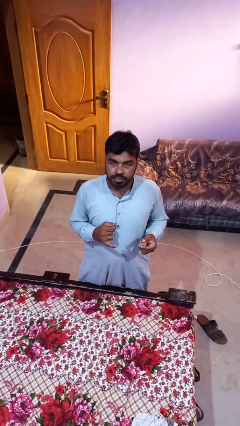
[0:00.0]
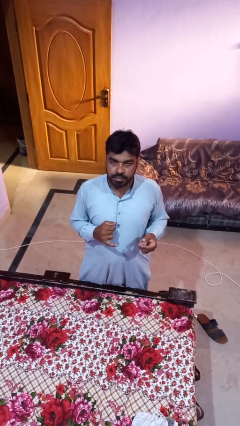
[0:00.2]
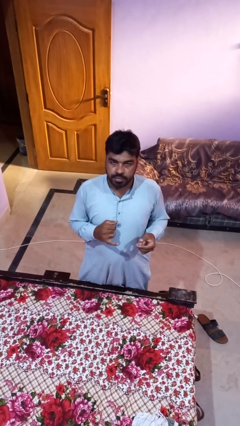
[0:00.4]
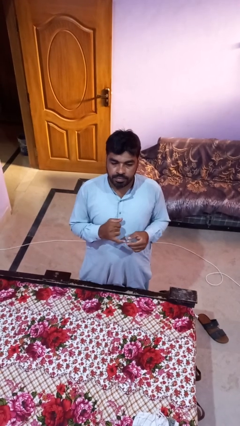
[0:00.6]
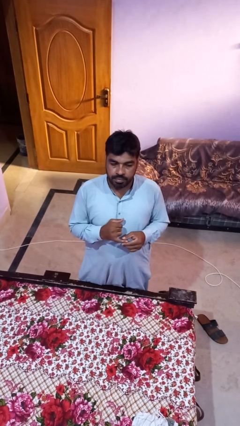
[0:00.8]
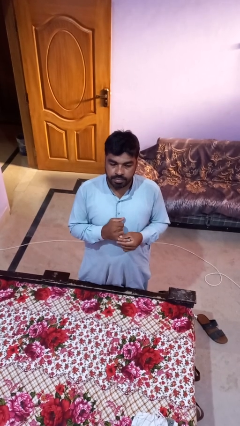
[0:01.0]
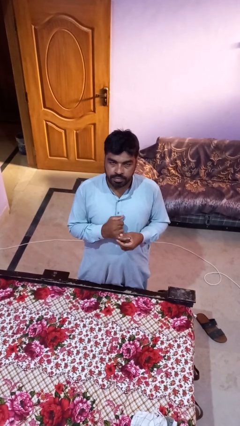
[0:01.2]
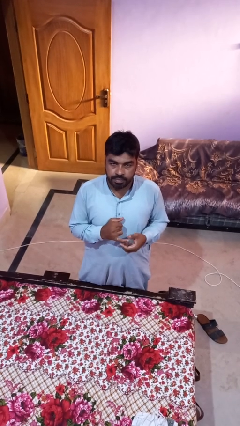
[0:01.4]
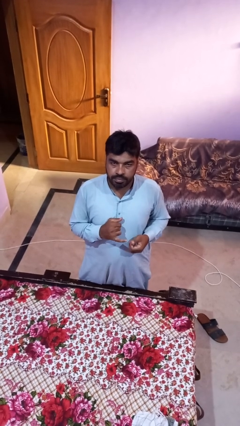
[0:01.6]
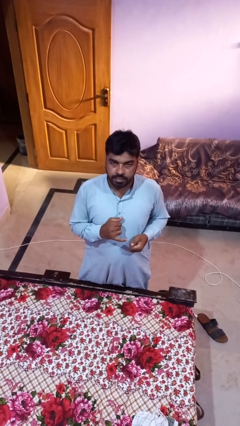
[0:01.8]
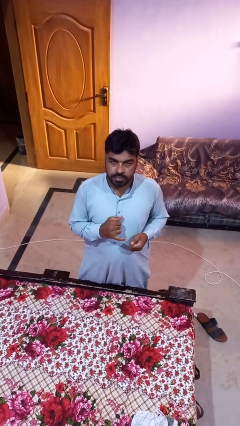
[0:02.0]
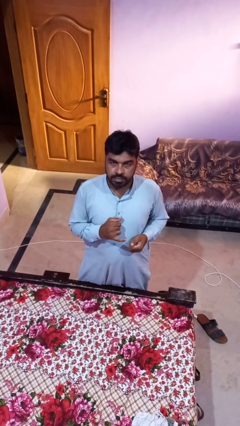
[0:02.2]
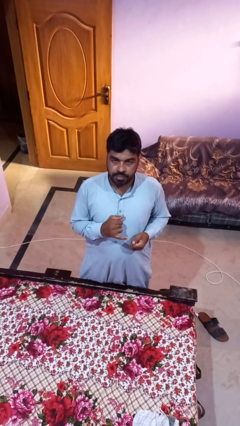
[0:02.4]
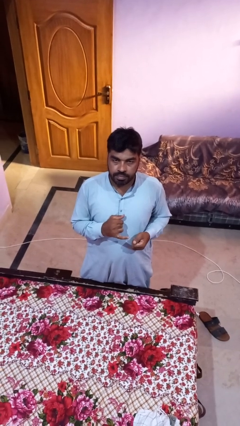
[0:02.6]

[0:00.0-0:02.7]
person puts on ring

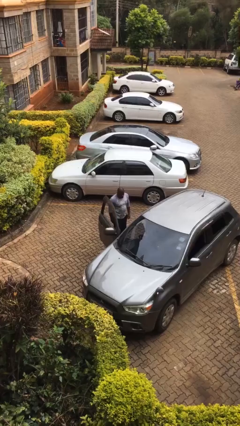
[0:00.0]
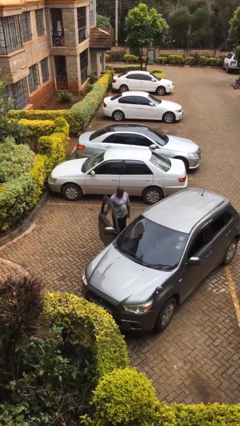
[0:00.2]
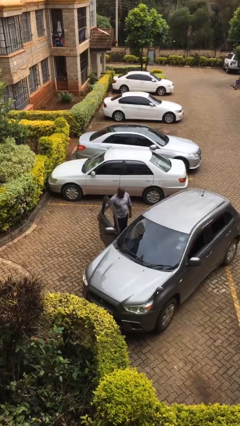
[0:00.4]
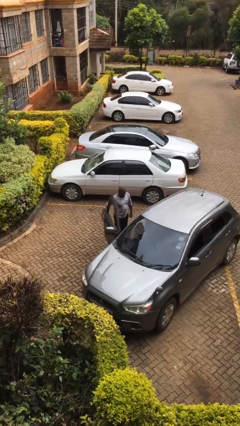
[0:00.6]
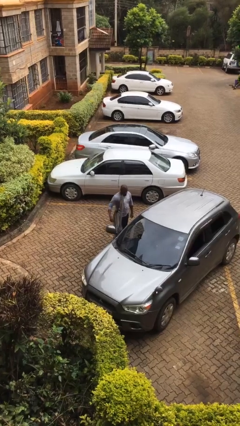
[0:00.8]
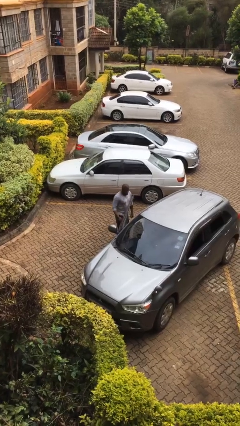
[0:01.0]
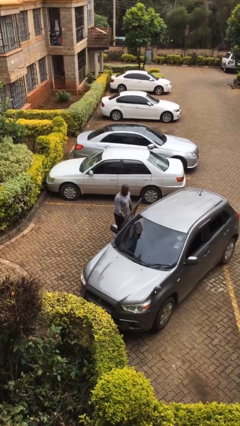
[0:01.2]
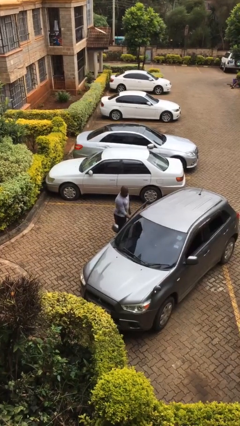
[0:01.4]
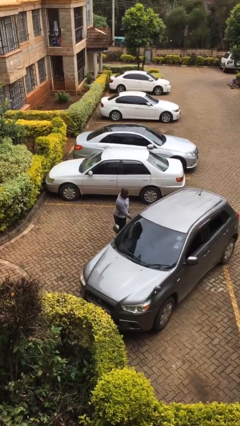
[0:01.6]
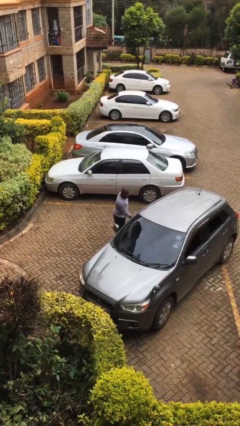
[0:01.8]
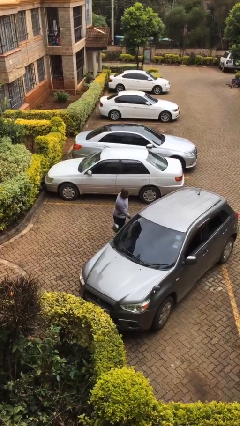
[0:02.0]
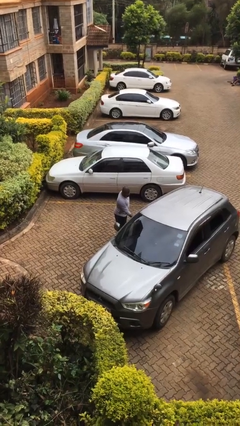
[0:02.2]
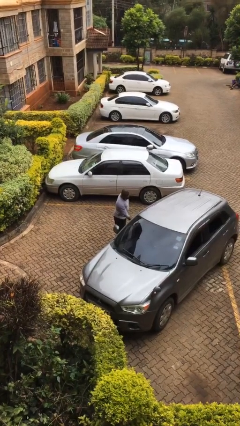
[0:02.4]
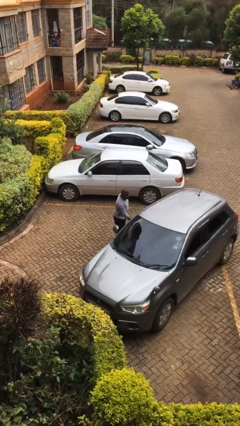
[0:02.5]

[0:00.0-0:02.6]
person closes car door

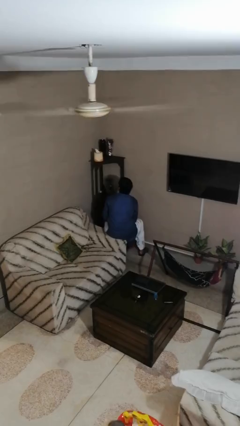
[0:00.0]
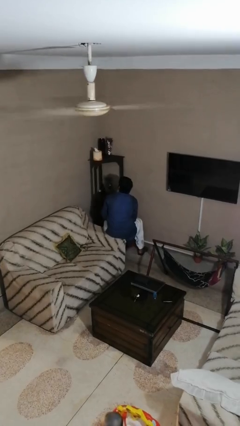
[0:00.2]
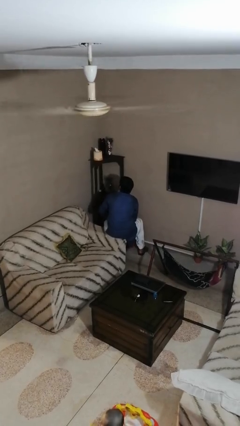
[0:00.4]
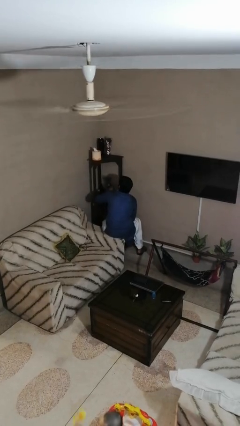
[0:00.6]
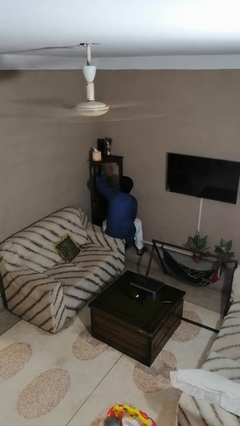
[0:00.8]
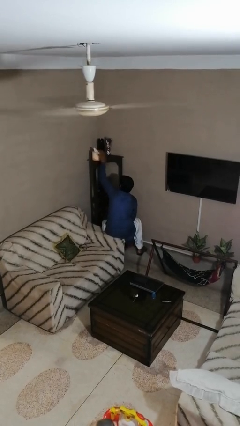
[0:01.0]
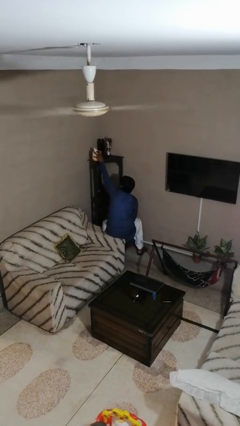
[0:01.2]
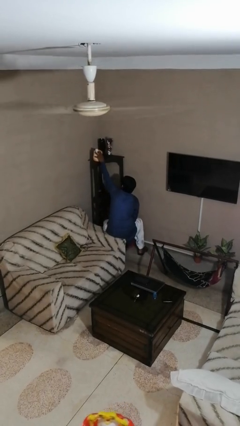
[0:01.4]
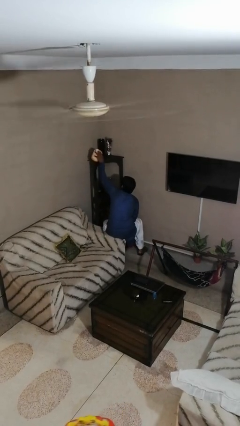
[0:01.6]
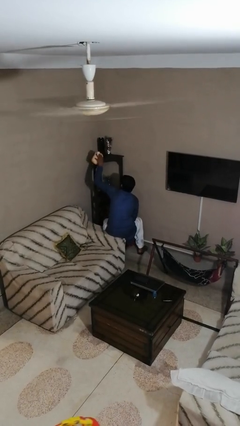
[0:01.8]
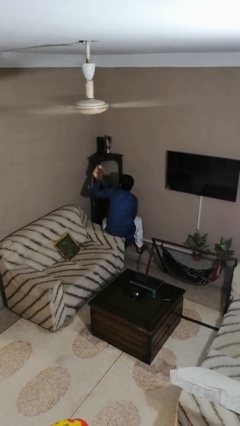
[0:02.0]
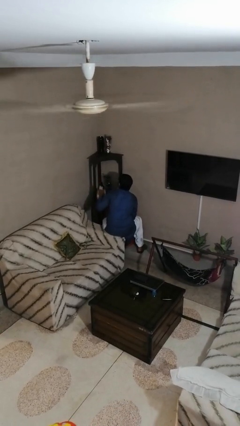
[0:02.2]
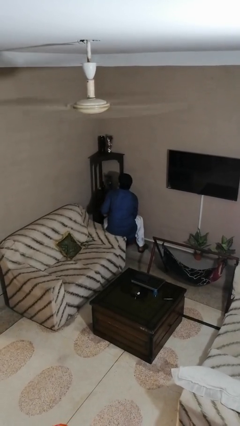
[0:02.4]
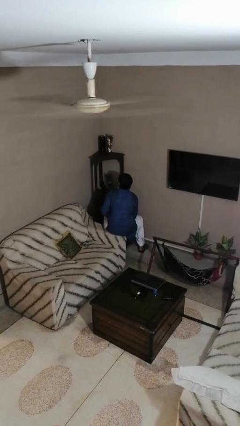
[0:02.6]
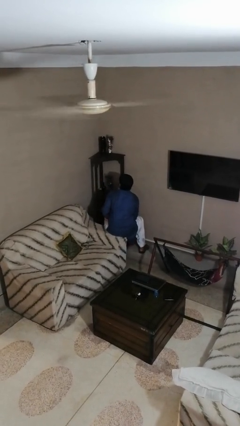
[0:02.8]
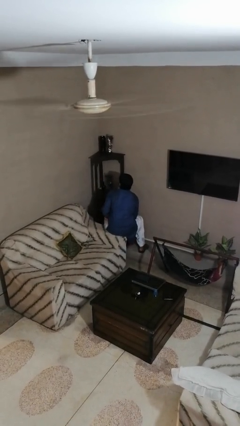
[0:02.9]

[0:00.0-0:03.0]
person picks up object from shelf

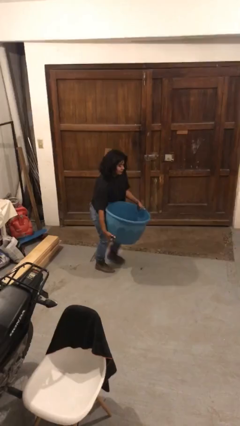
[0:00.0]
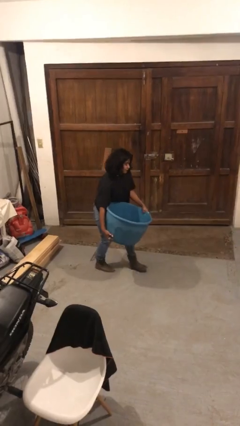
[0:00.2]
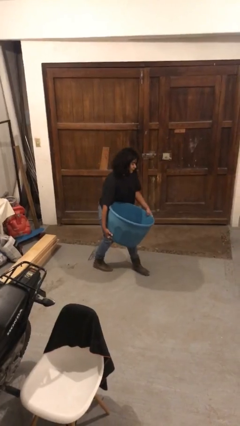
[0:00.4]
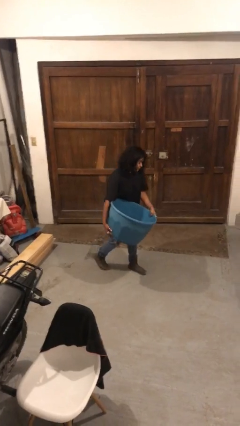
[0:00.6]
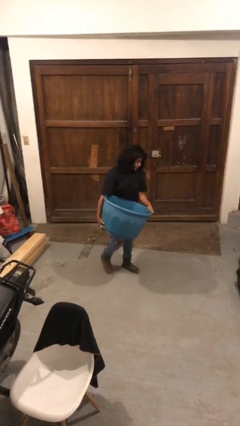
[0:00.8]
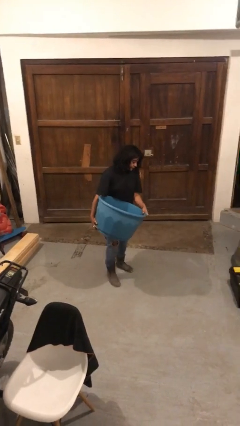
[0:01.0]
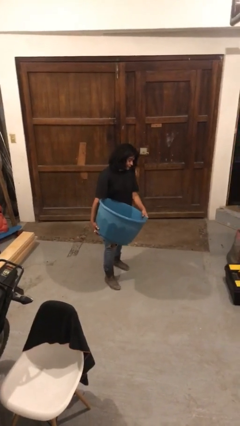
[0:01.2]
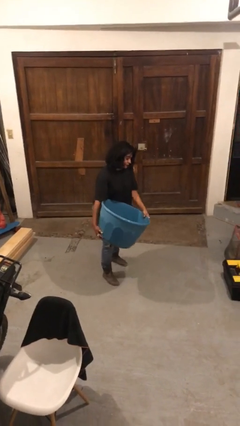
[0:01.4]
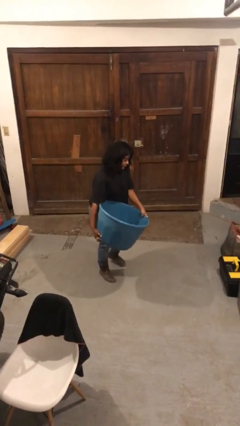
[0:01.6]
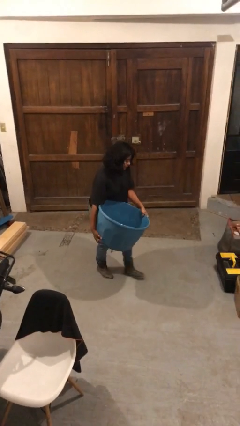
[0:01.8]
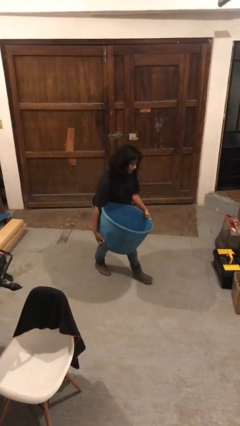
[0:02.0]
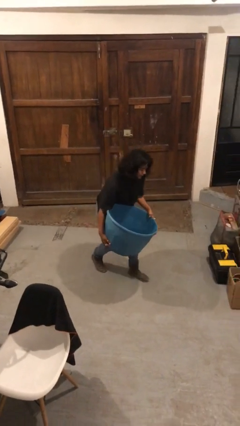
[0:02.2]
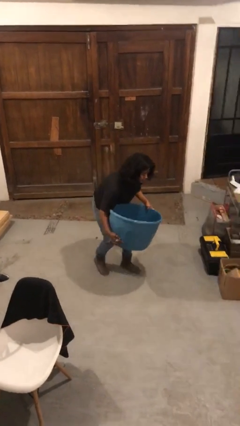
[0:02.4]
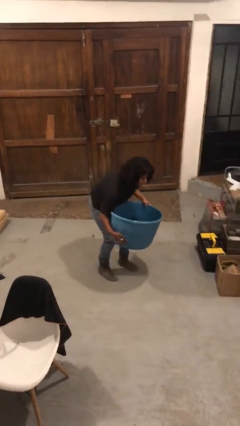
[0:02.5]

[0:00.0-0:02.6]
person carries heavy object

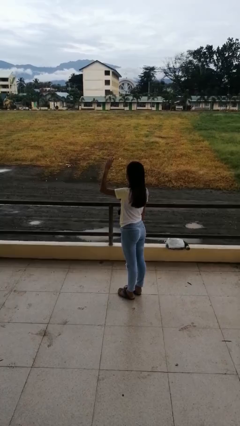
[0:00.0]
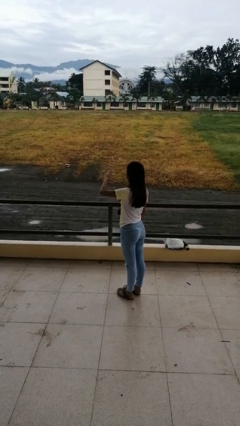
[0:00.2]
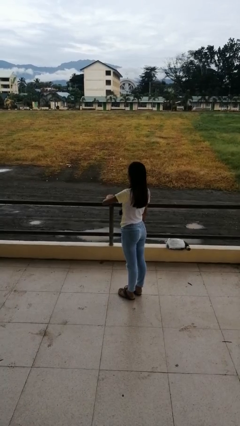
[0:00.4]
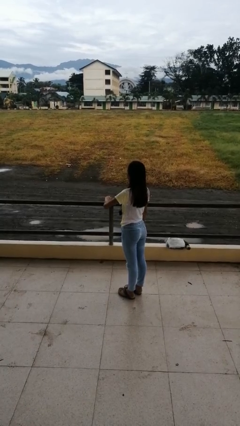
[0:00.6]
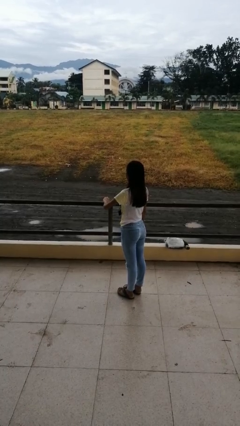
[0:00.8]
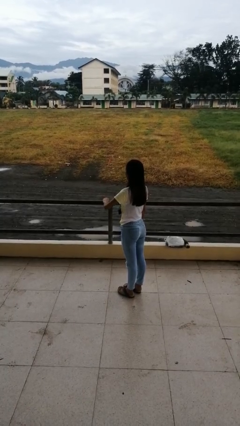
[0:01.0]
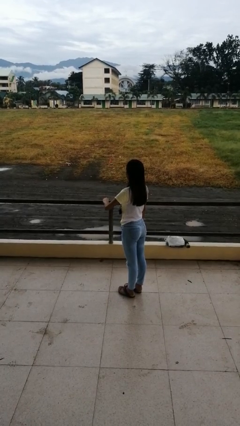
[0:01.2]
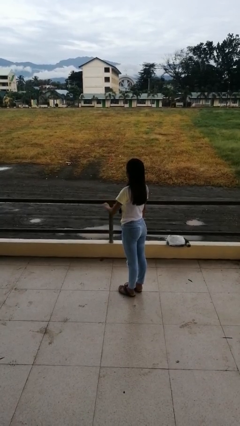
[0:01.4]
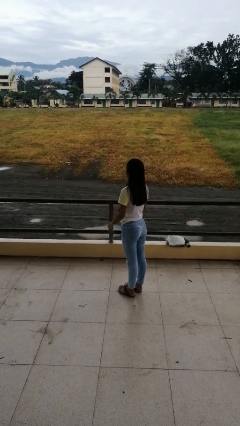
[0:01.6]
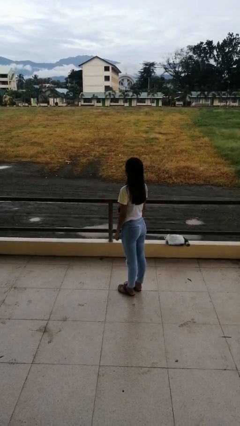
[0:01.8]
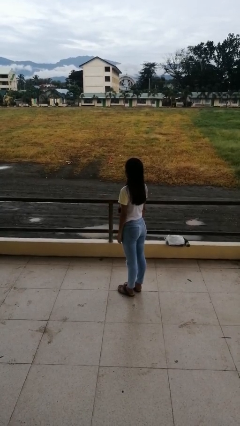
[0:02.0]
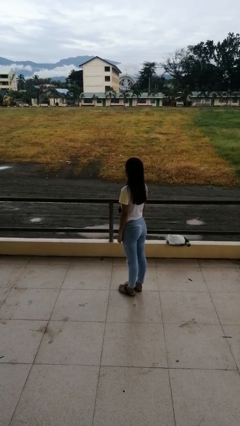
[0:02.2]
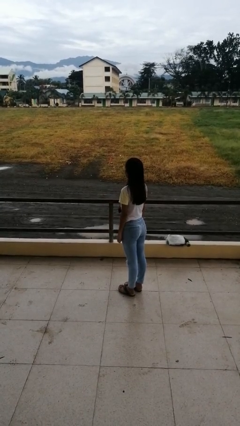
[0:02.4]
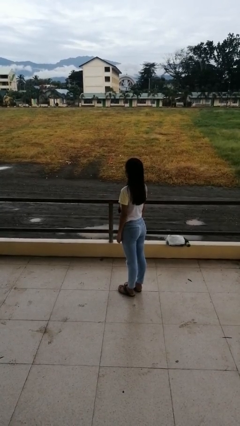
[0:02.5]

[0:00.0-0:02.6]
person gestures swipe down

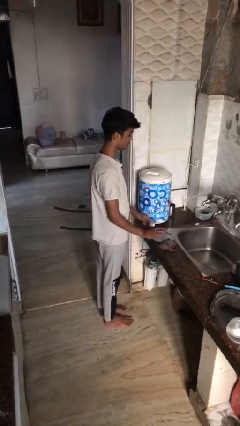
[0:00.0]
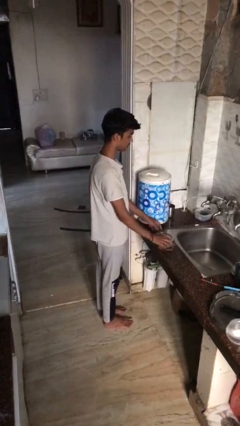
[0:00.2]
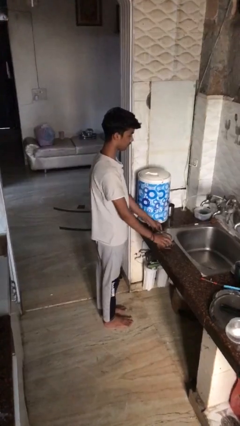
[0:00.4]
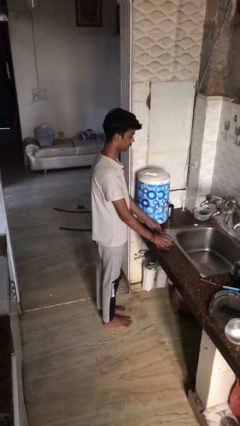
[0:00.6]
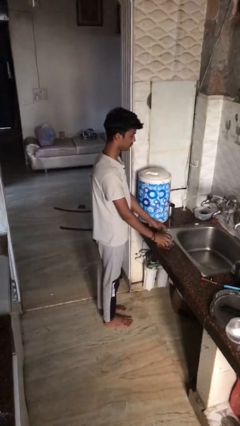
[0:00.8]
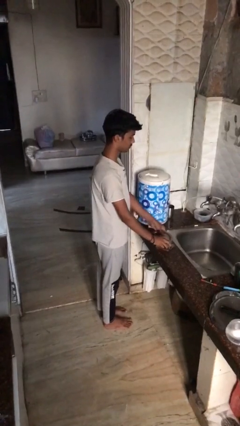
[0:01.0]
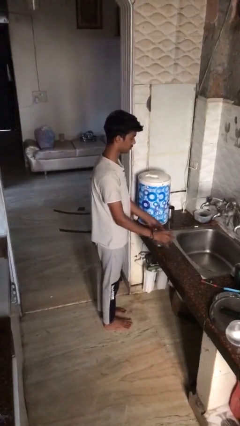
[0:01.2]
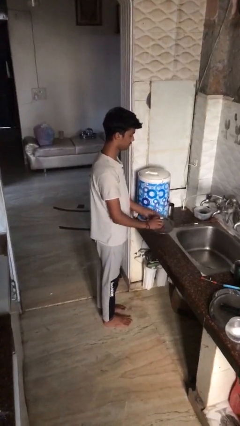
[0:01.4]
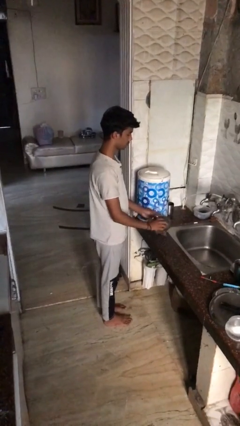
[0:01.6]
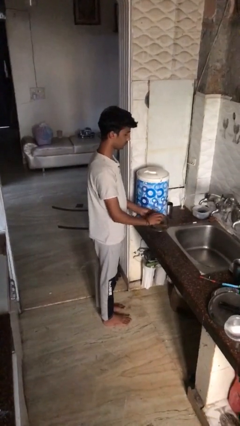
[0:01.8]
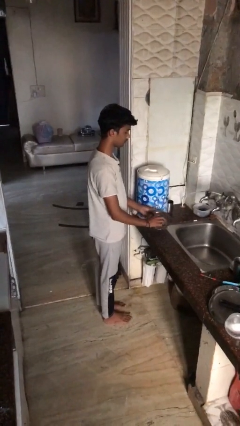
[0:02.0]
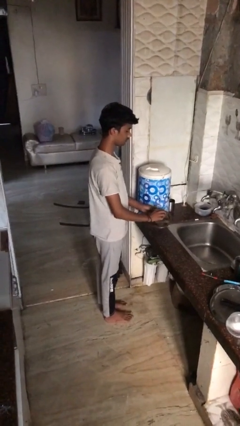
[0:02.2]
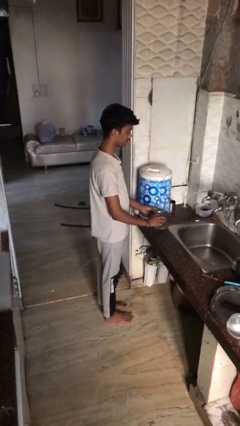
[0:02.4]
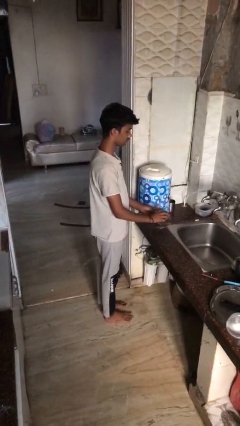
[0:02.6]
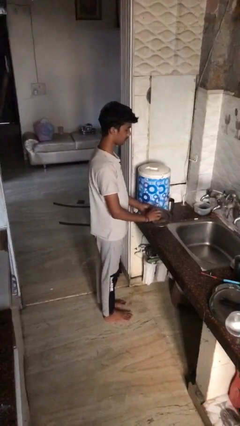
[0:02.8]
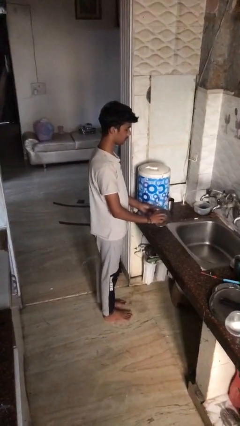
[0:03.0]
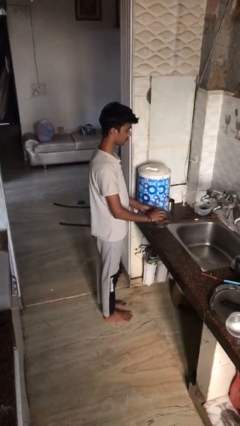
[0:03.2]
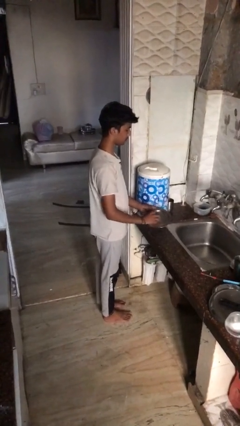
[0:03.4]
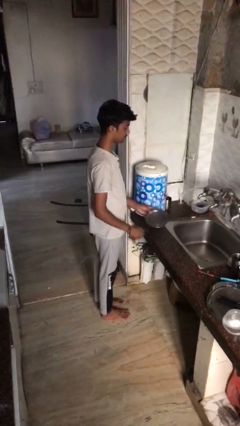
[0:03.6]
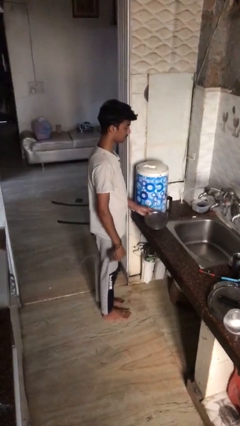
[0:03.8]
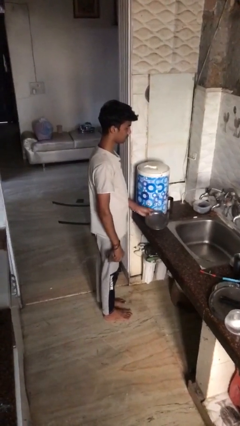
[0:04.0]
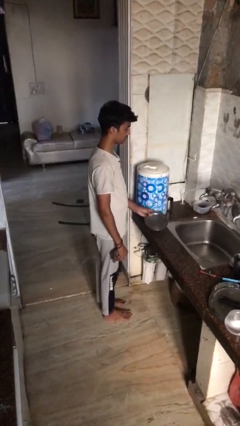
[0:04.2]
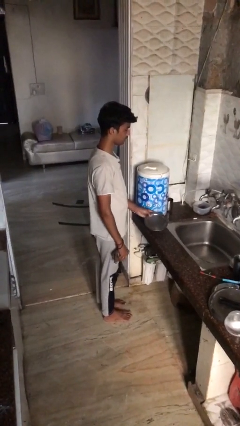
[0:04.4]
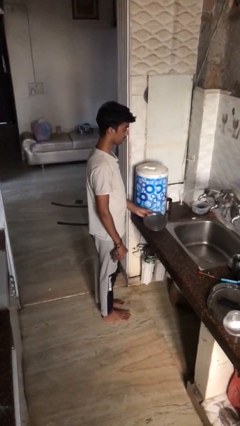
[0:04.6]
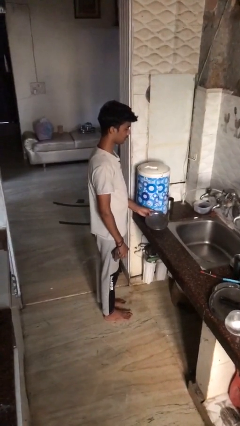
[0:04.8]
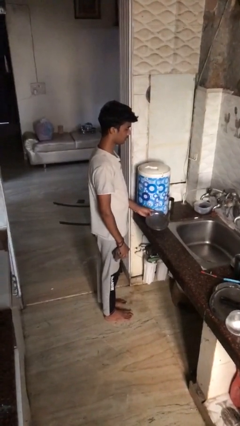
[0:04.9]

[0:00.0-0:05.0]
person dries dish
